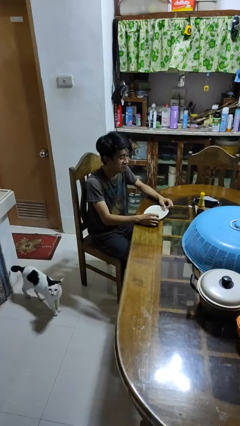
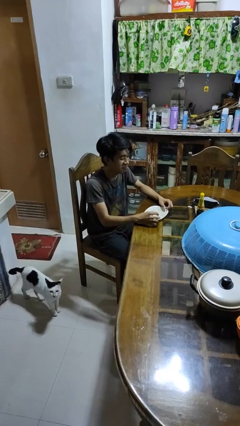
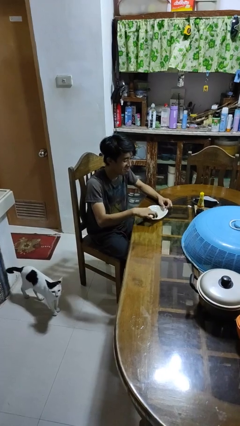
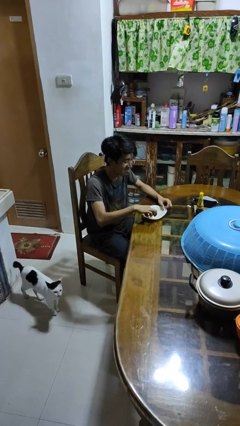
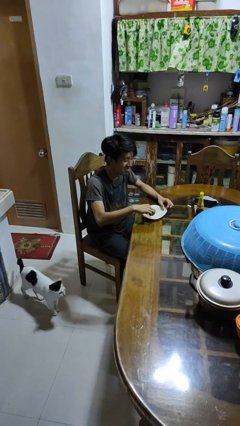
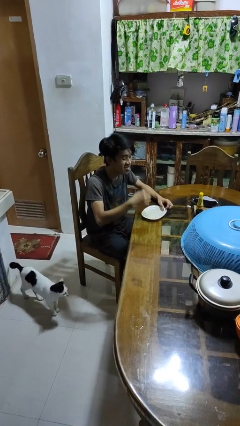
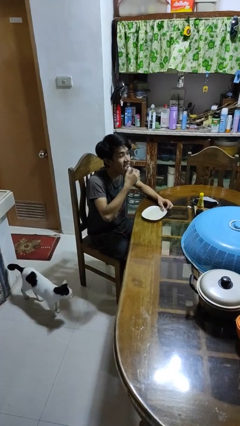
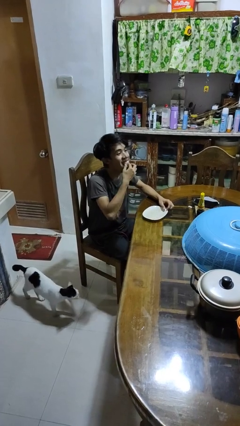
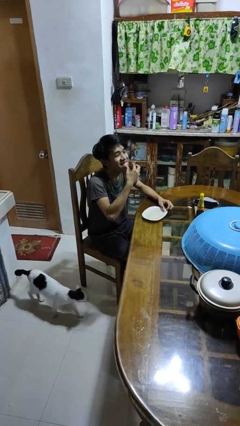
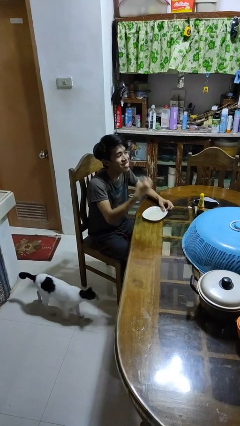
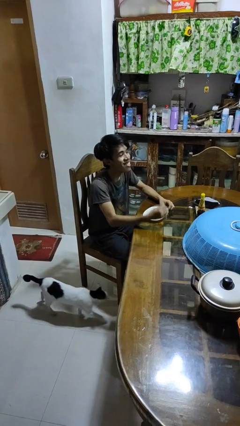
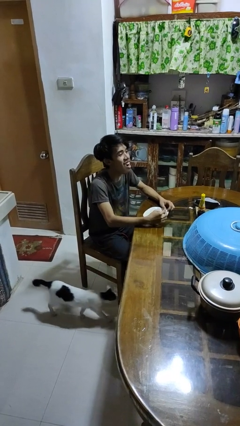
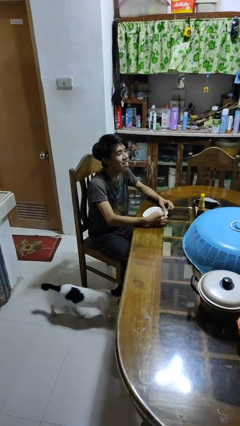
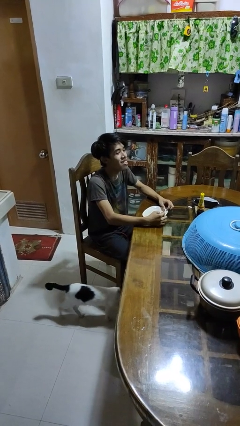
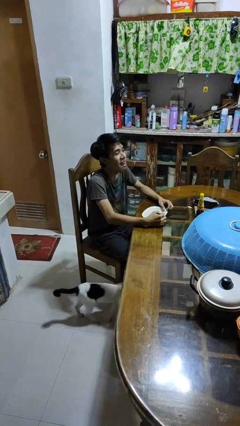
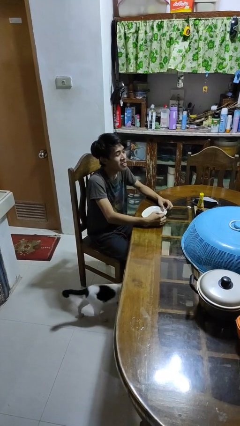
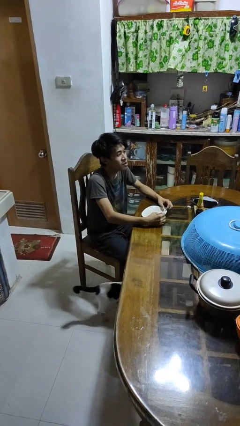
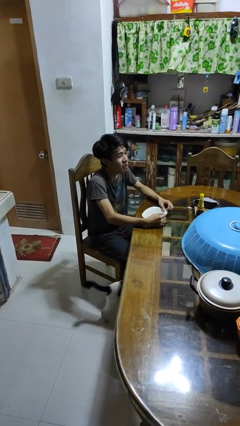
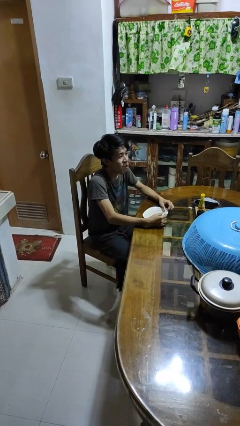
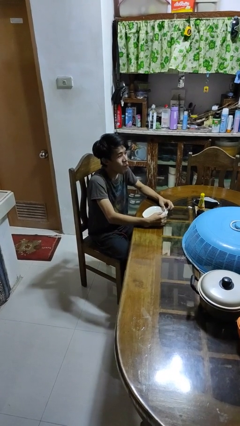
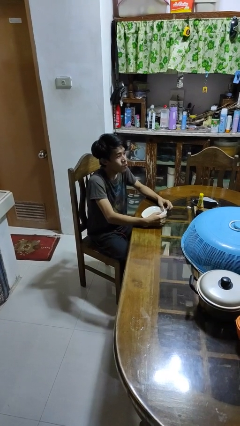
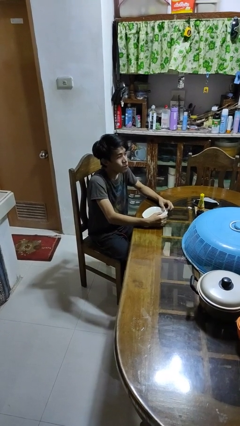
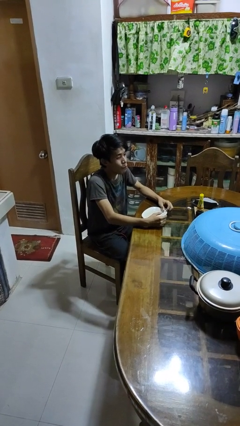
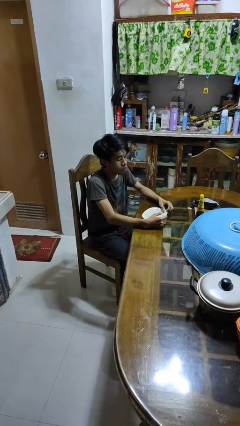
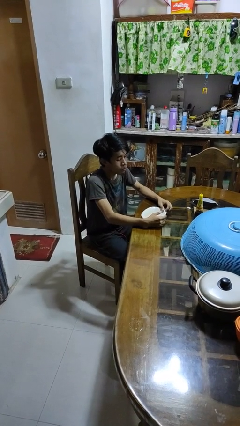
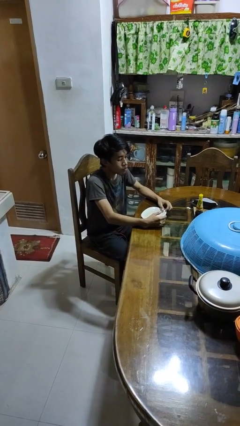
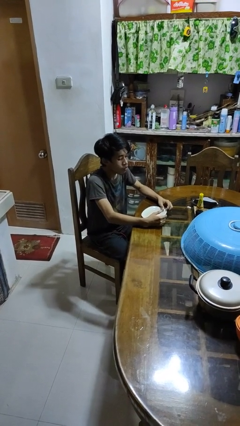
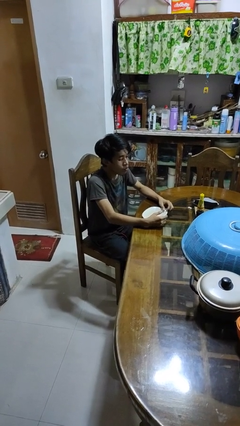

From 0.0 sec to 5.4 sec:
person eats with hands

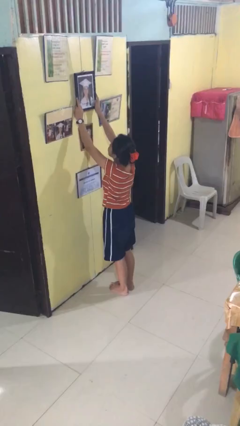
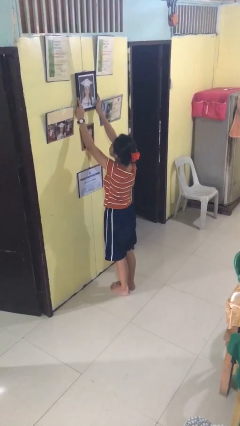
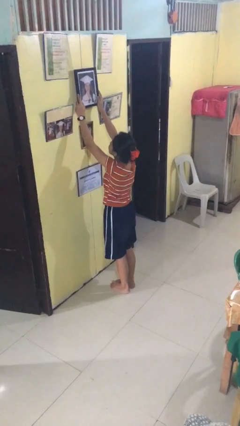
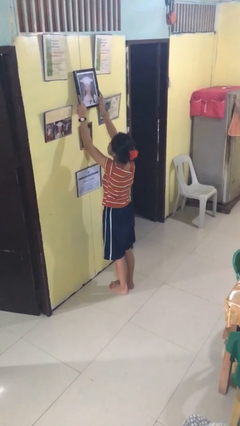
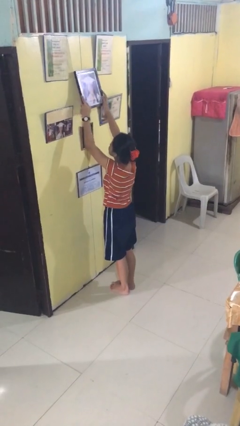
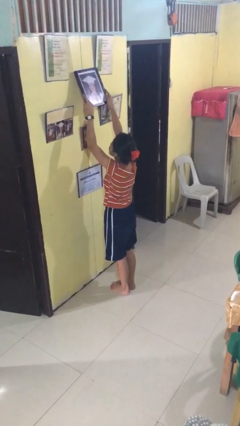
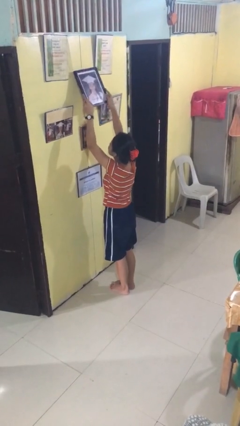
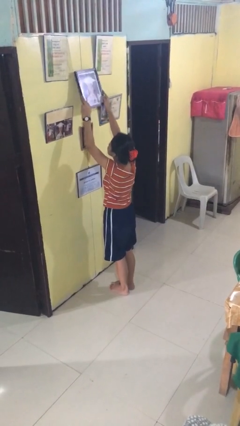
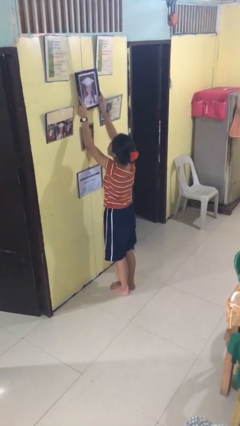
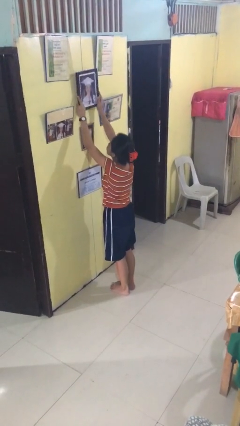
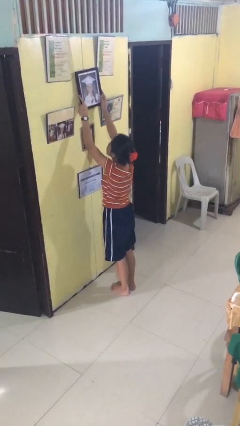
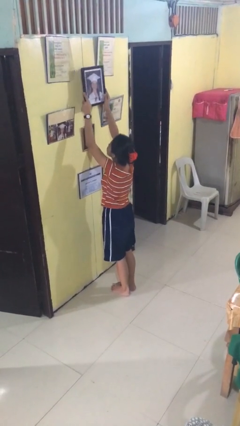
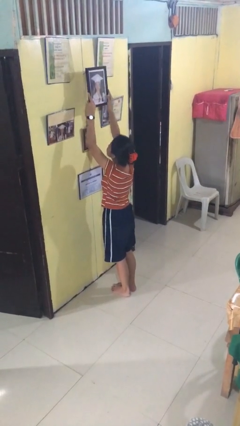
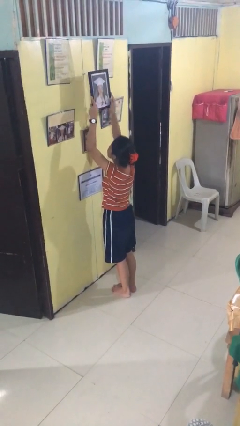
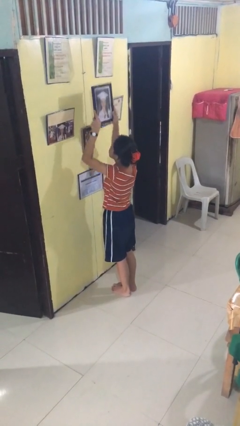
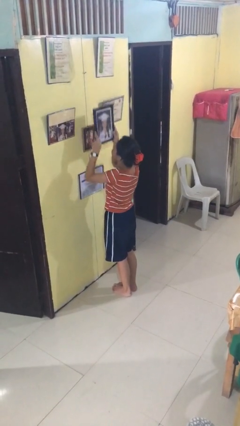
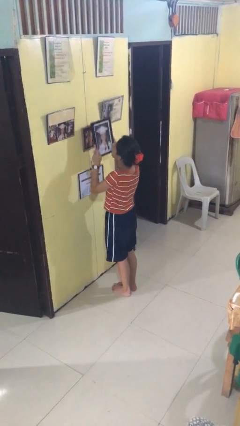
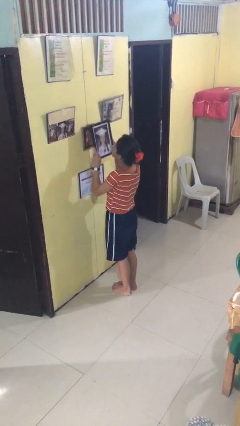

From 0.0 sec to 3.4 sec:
person takes down picture frame

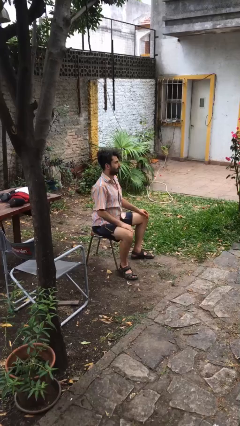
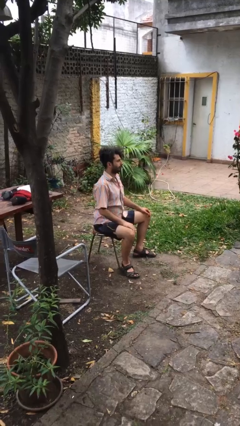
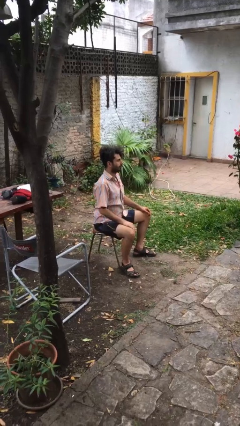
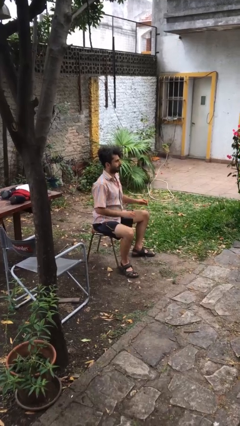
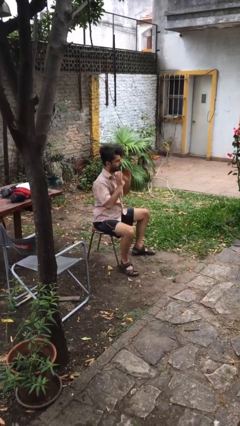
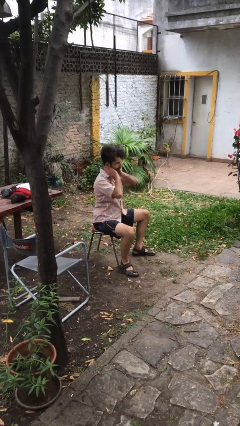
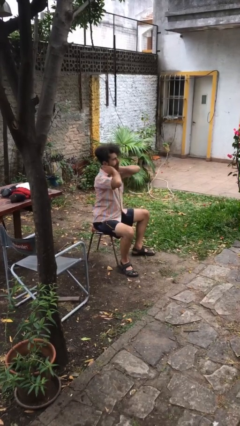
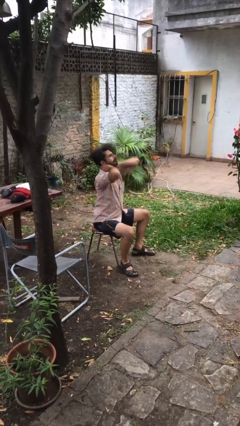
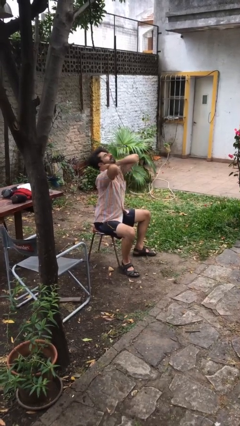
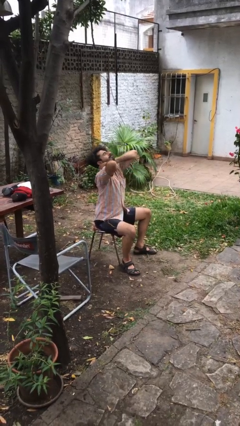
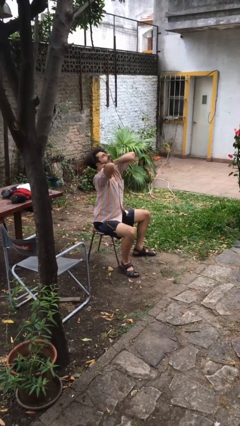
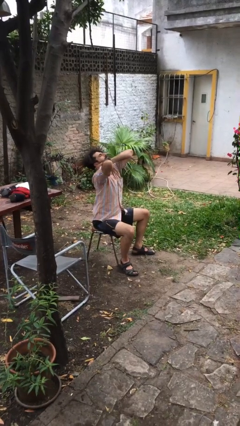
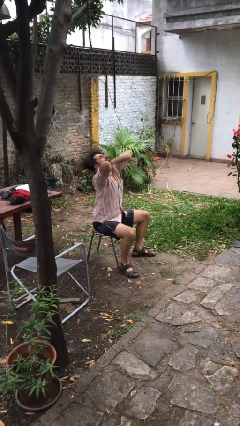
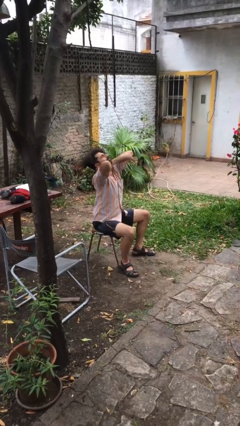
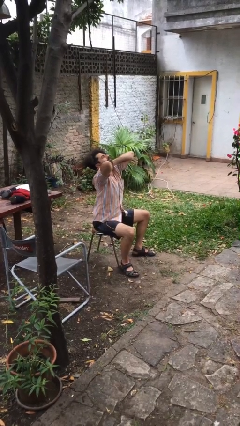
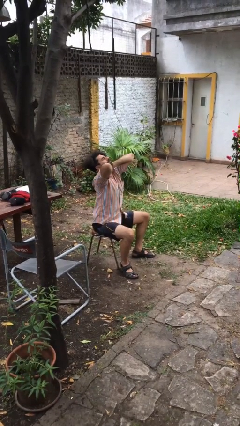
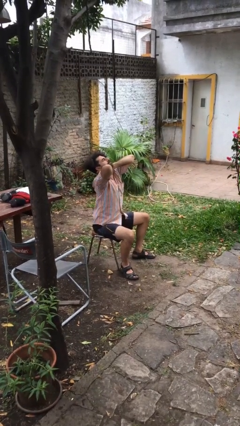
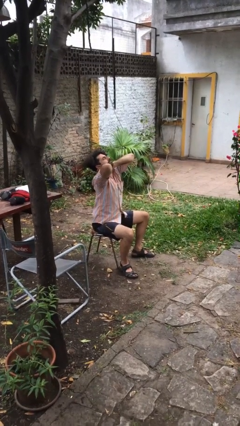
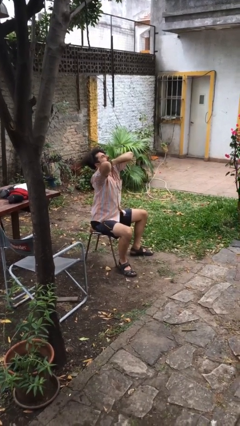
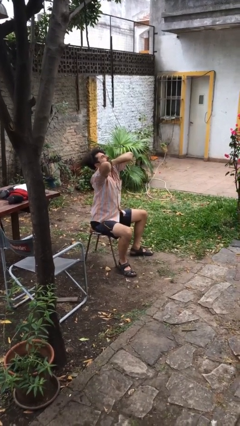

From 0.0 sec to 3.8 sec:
person rubs neck

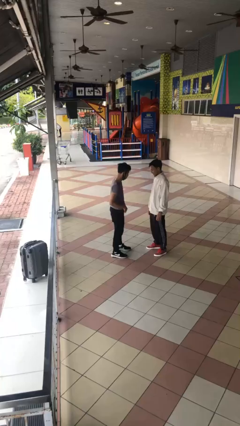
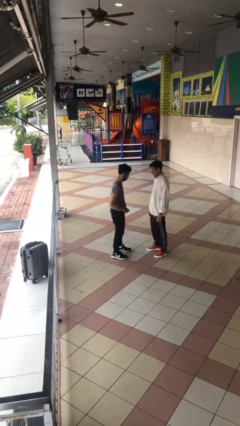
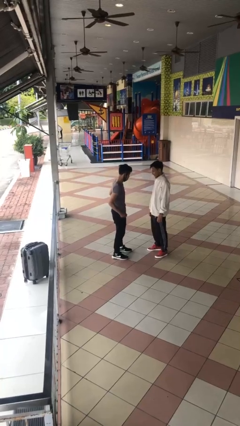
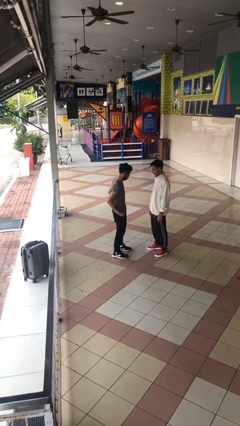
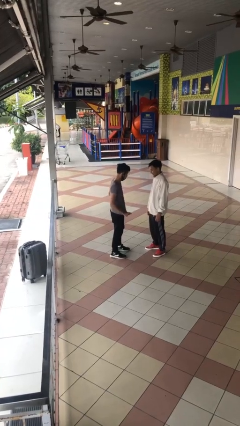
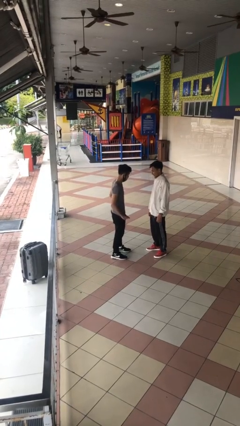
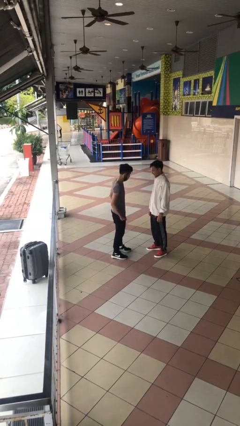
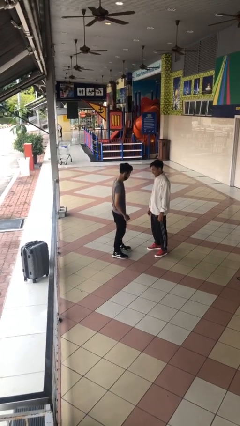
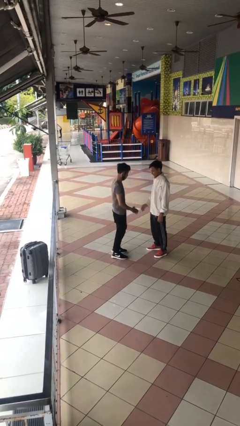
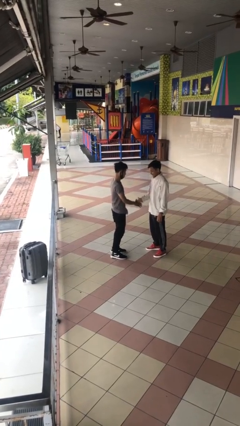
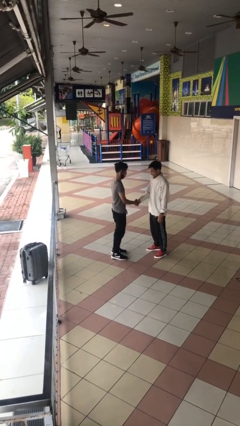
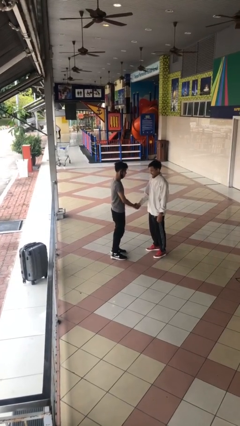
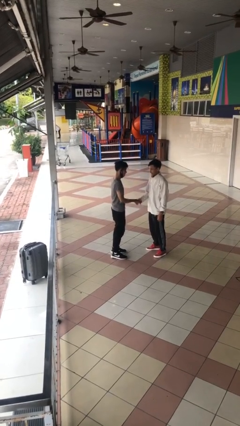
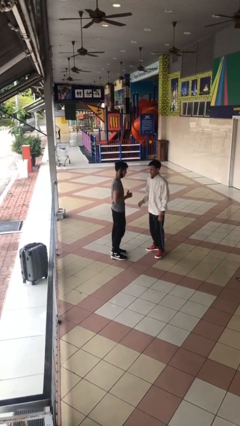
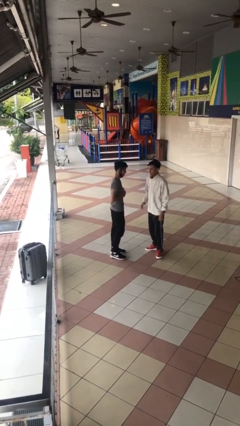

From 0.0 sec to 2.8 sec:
person shakes hand

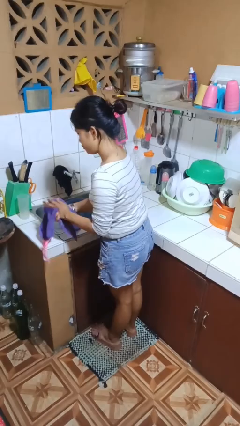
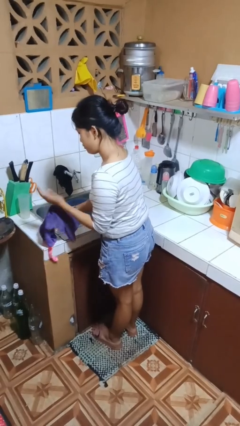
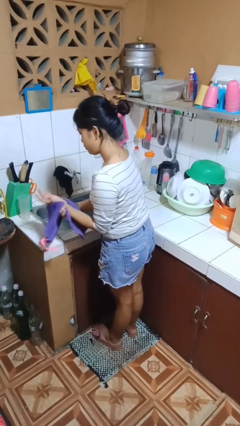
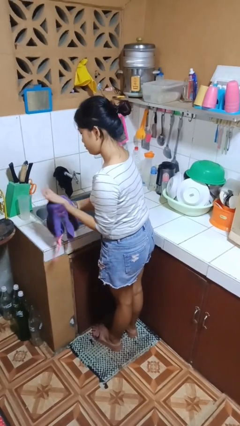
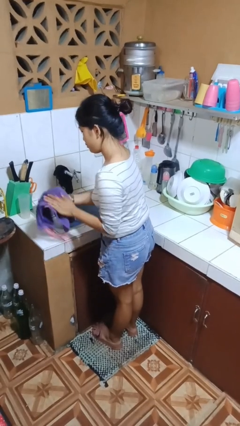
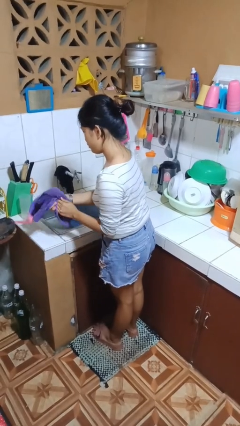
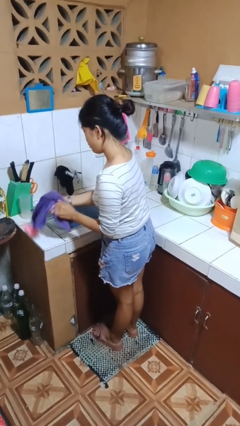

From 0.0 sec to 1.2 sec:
person dries hands with towel

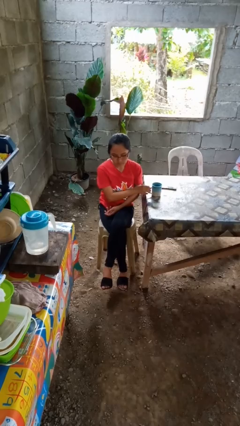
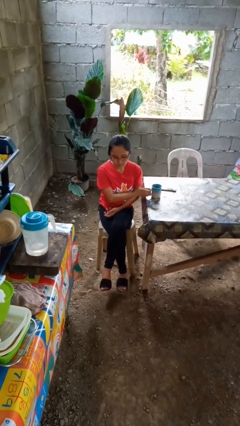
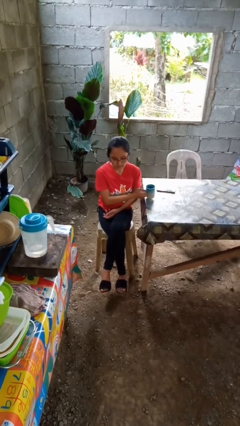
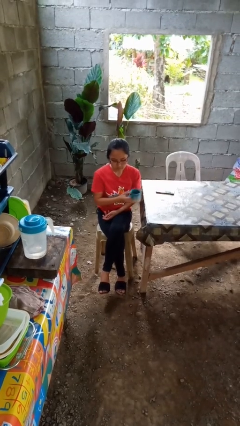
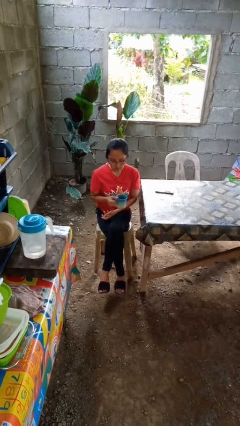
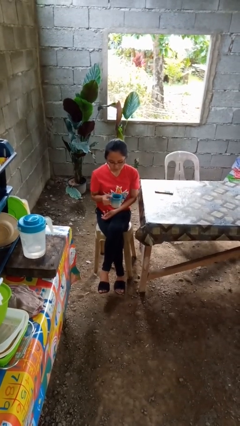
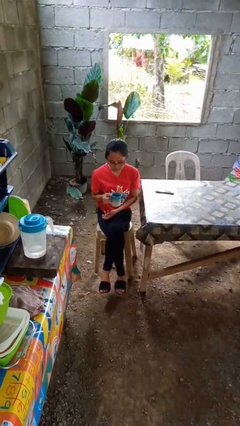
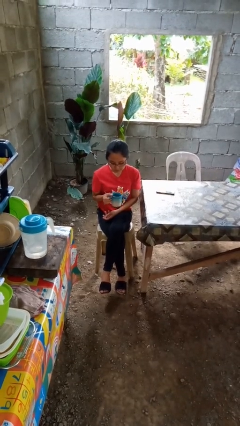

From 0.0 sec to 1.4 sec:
person picks up object from table
